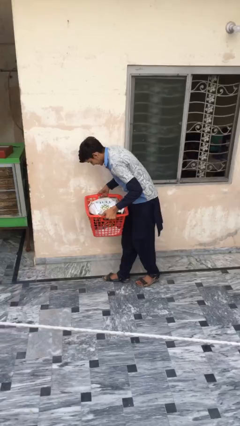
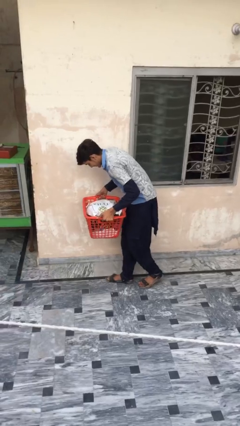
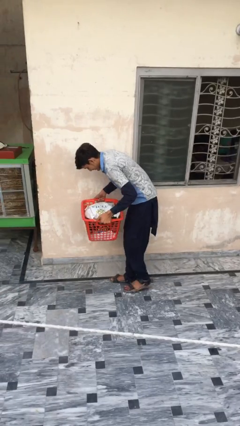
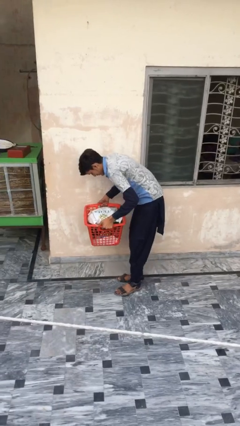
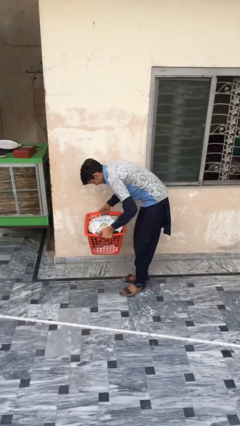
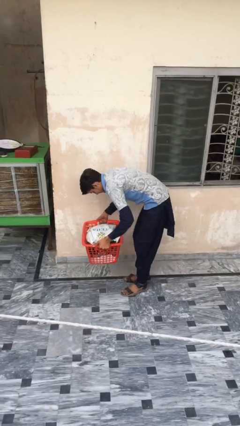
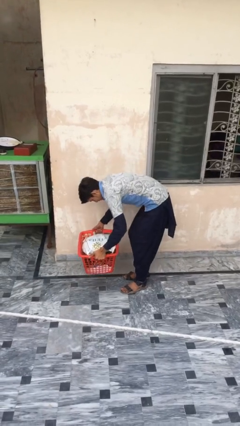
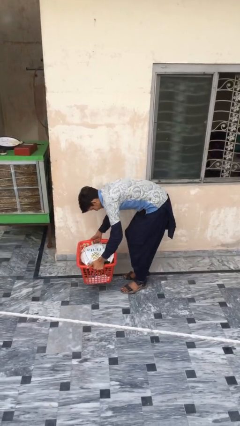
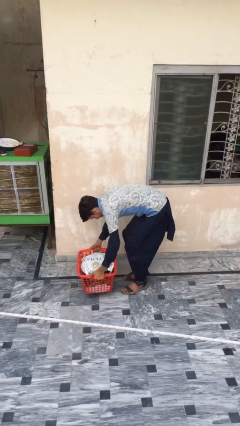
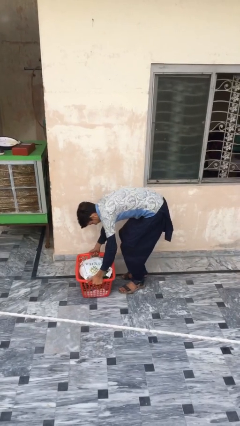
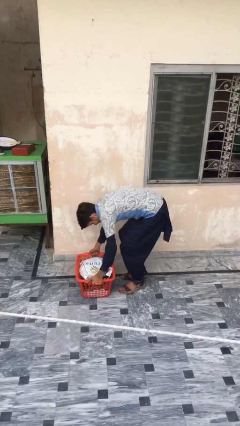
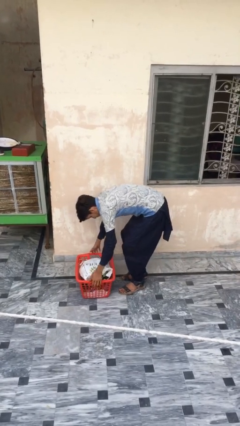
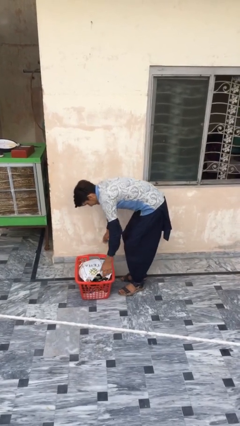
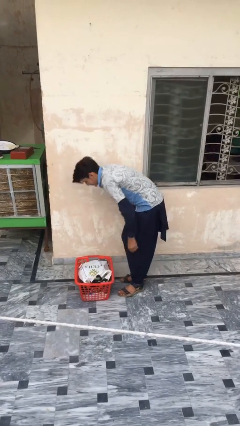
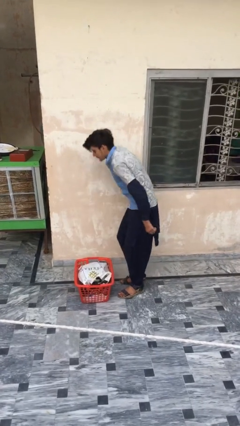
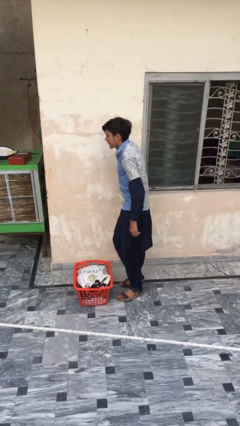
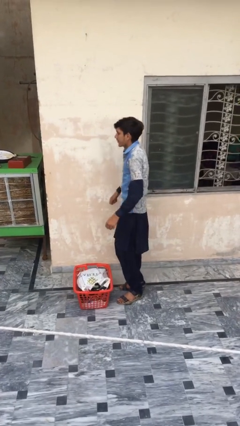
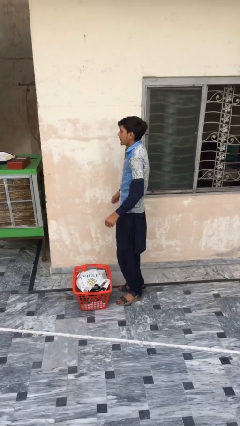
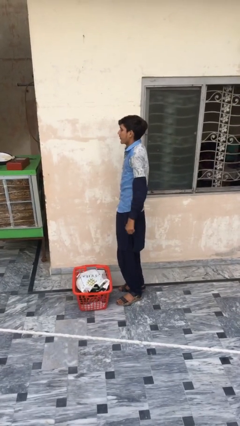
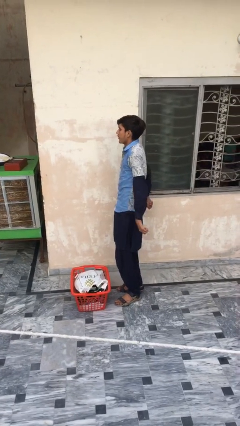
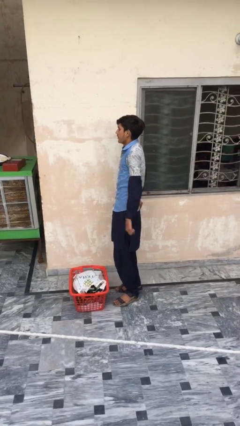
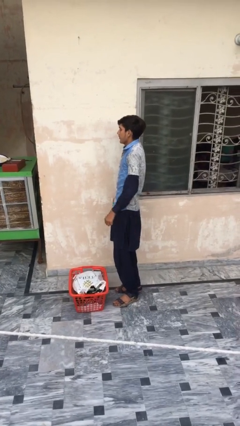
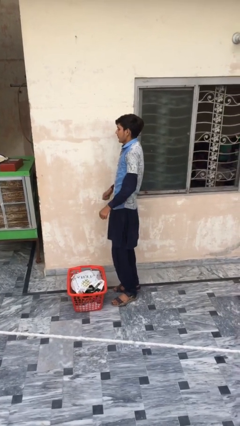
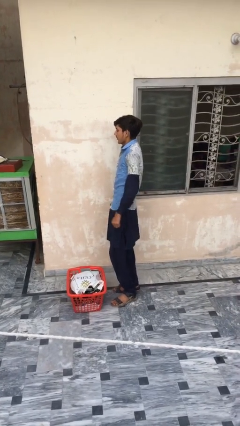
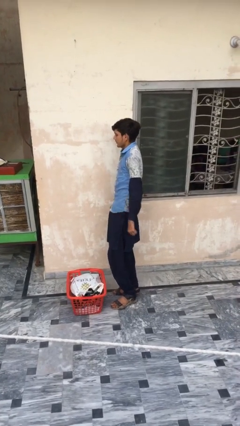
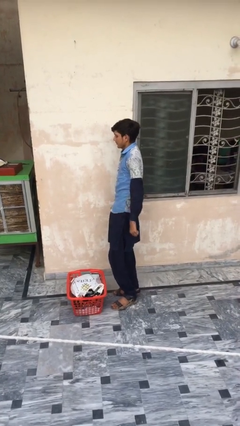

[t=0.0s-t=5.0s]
person puts down object on floor

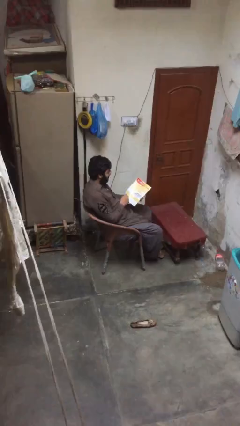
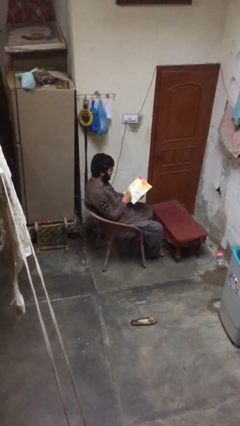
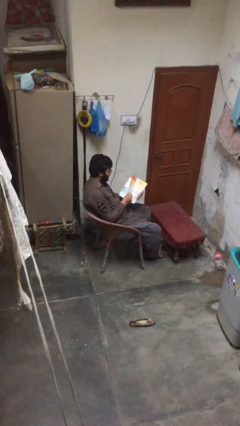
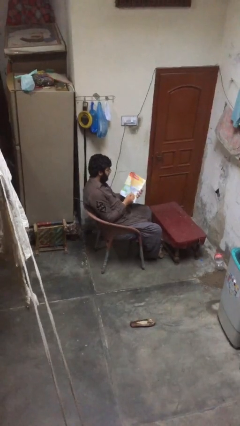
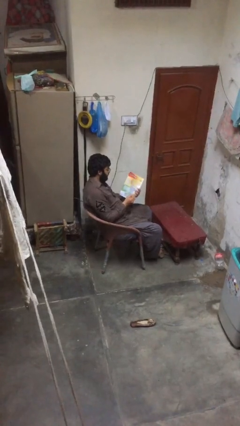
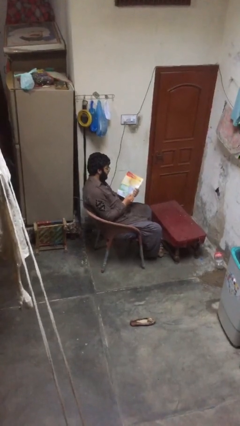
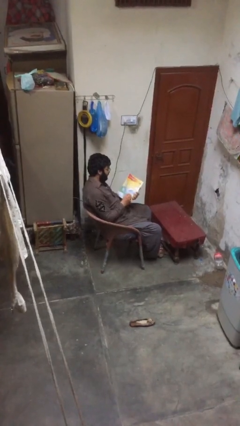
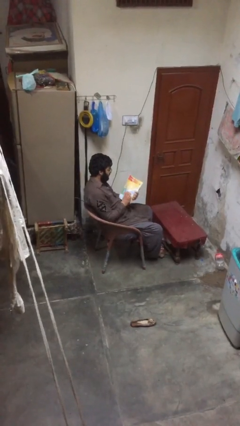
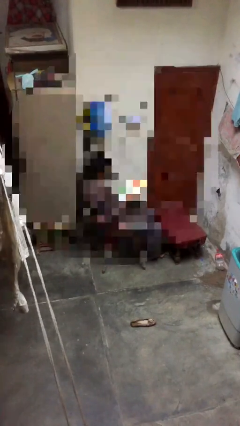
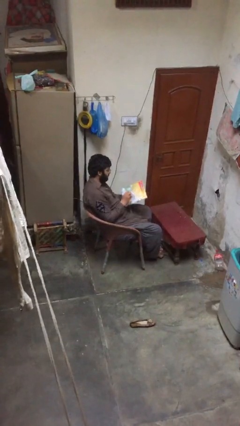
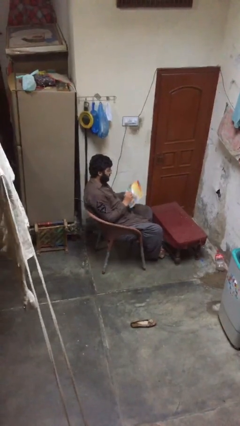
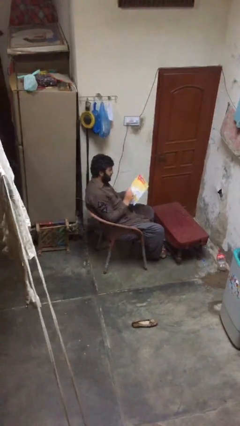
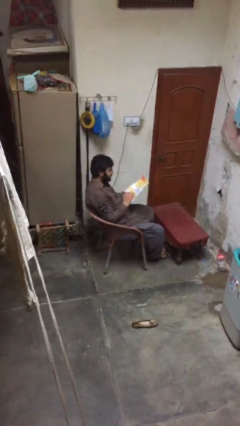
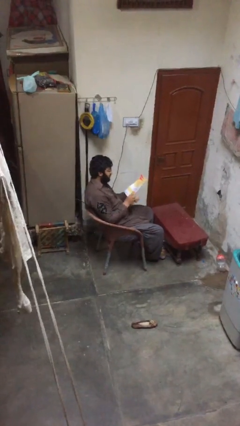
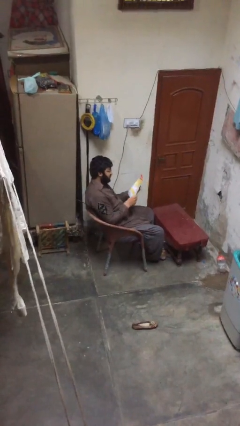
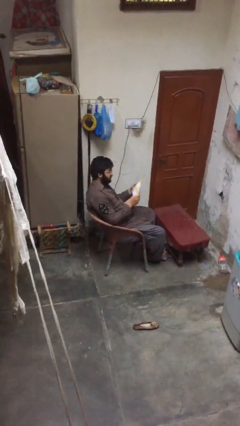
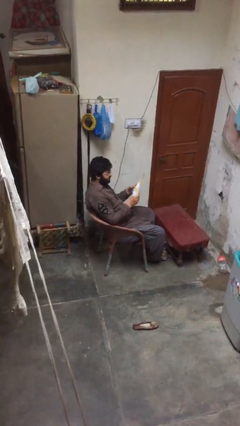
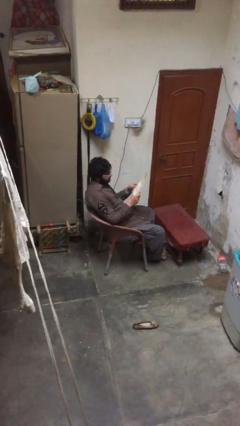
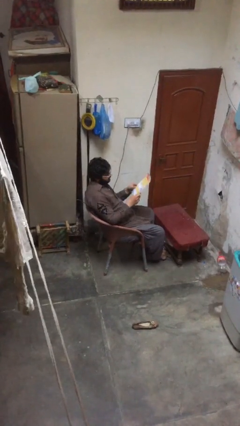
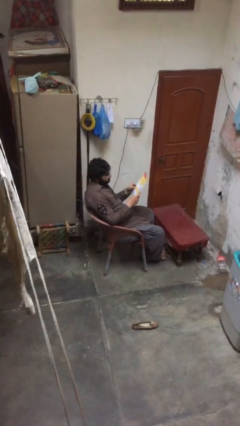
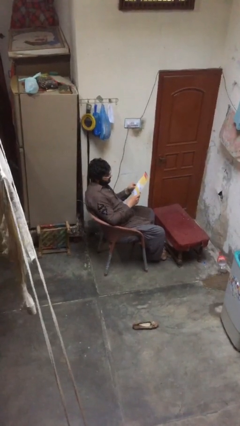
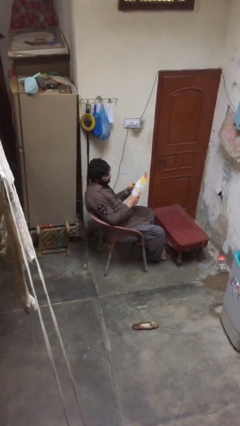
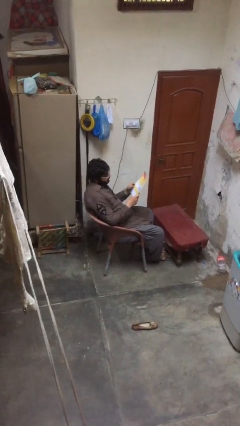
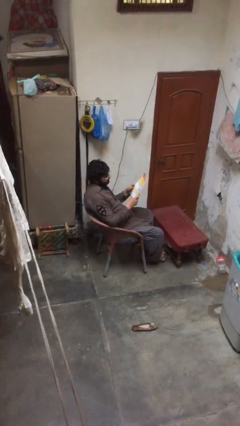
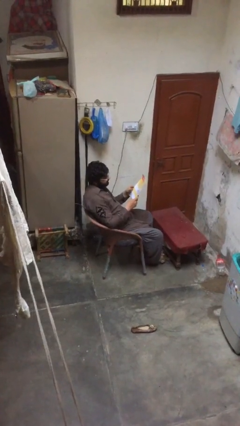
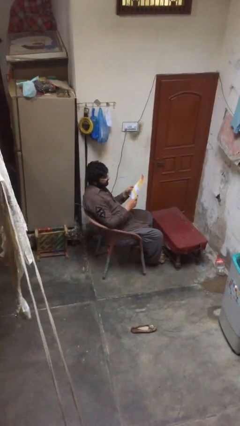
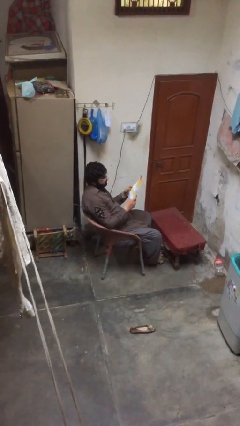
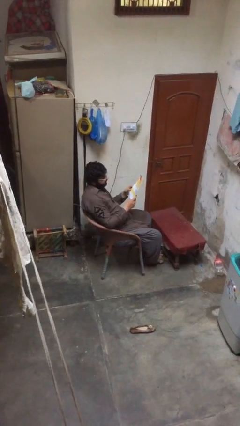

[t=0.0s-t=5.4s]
person reads document

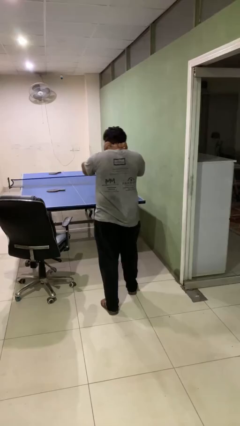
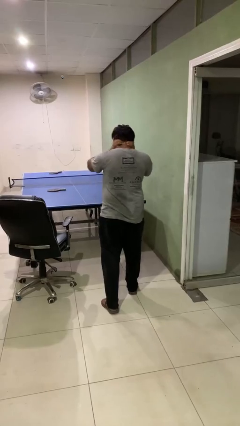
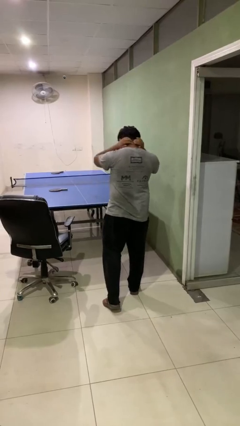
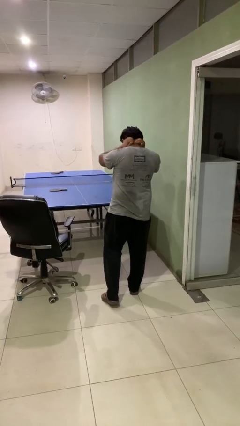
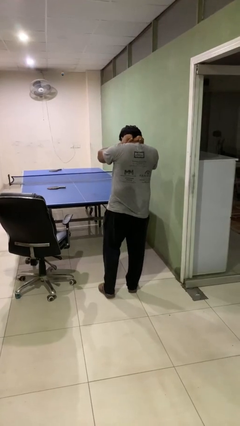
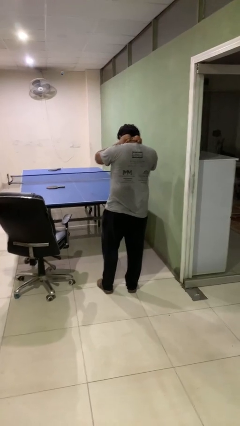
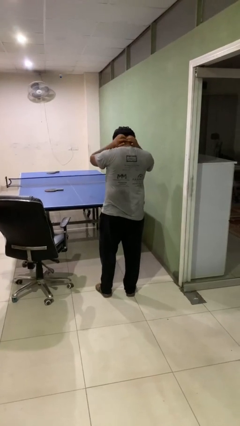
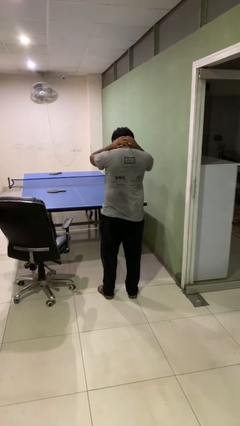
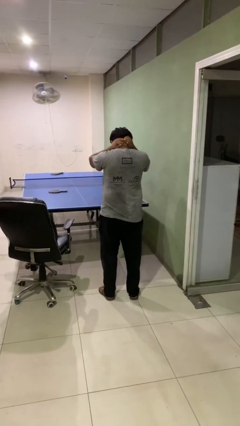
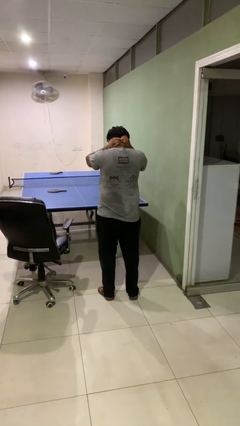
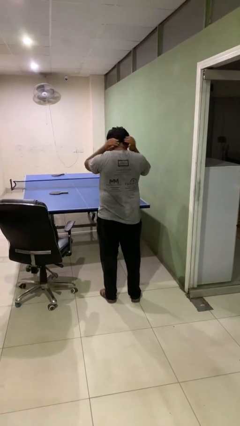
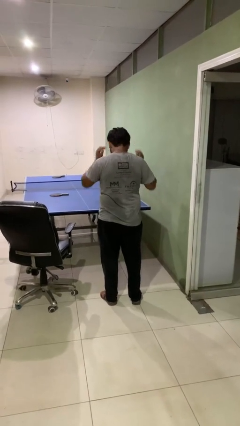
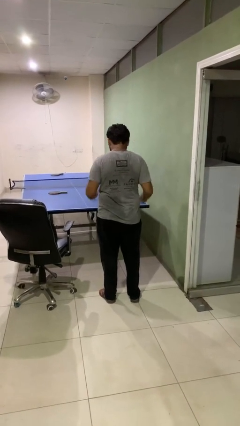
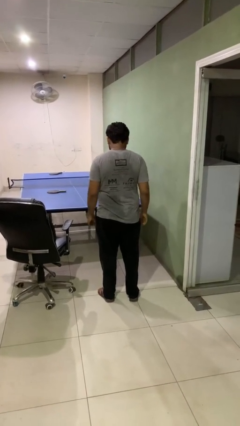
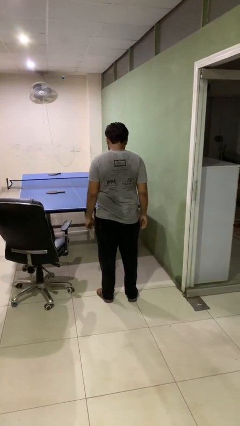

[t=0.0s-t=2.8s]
person rubs neck

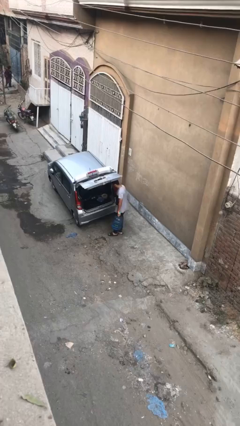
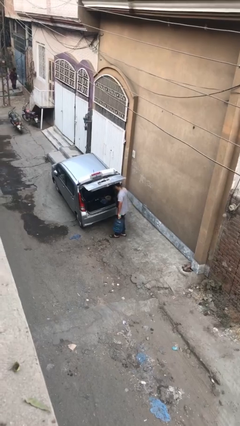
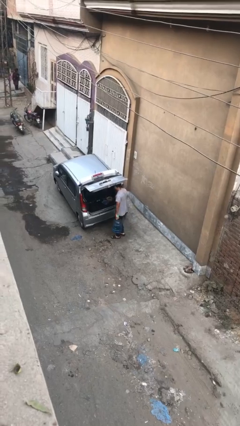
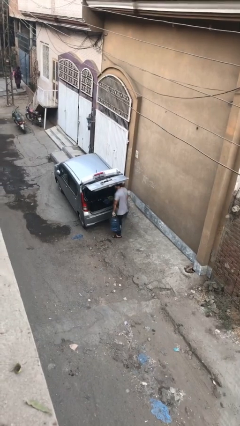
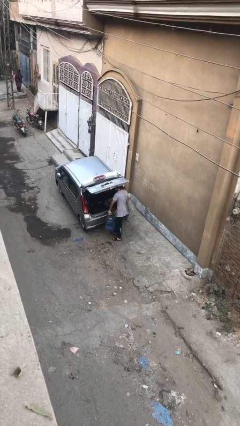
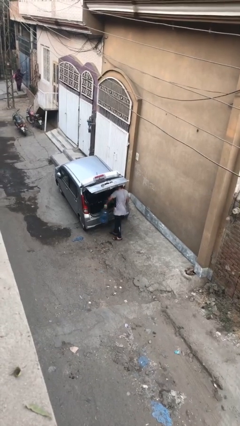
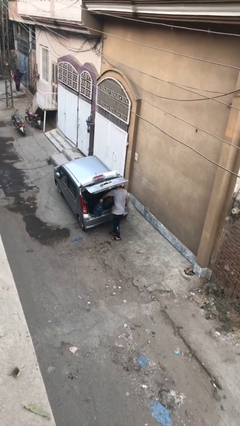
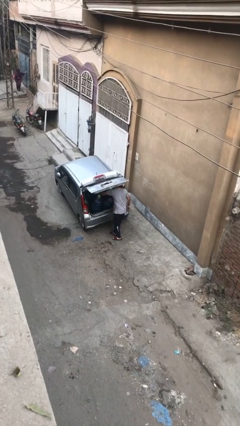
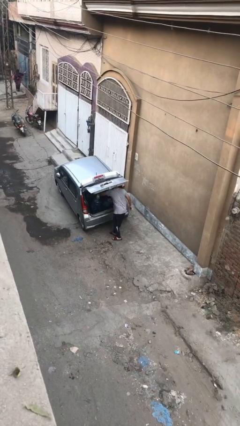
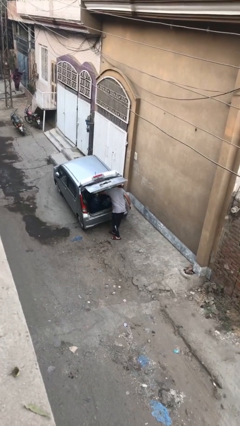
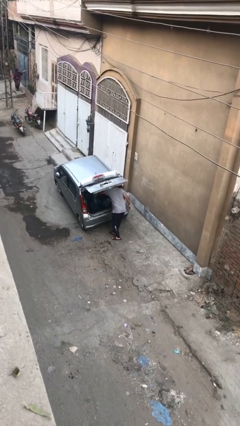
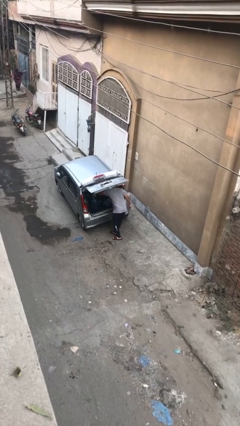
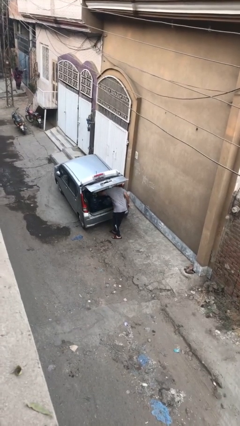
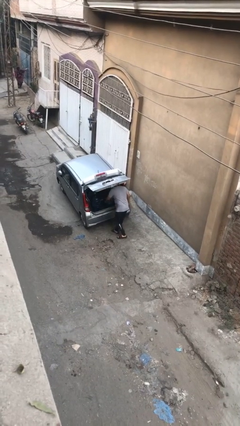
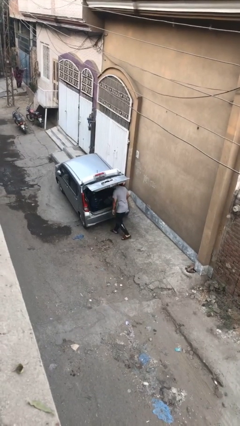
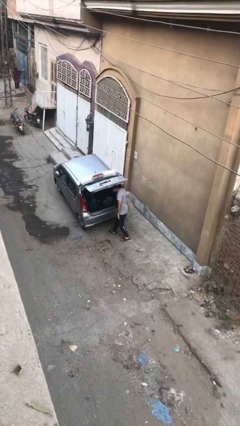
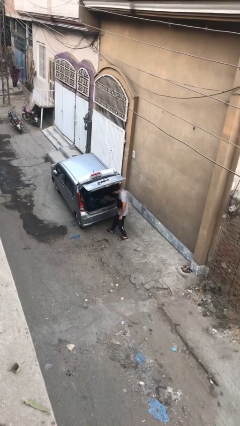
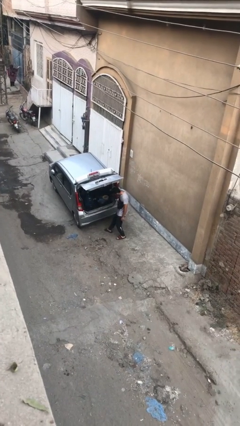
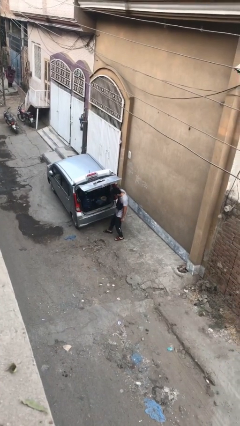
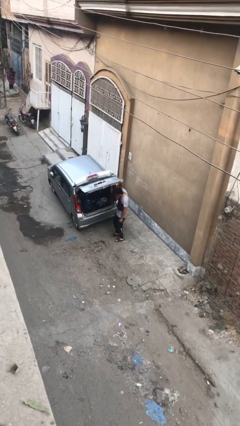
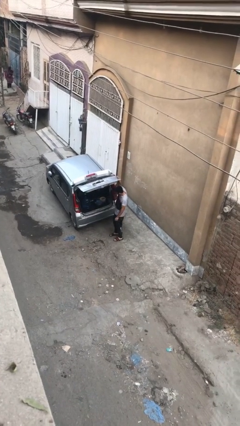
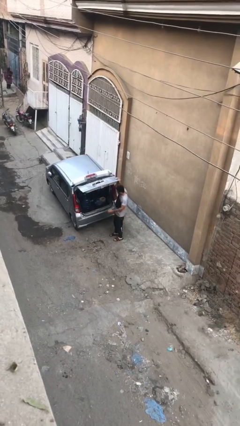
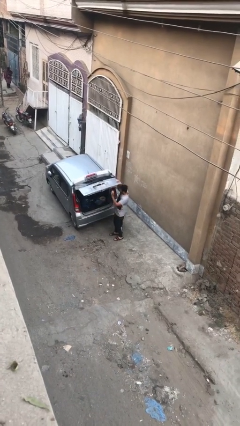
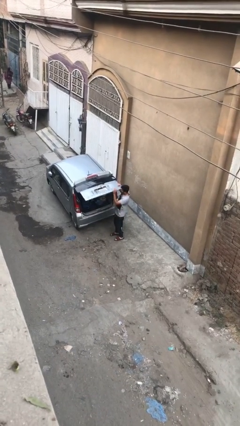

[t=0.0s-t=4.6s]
person loads car
